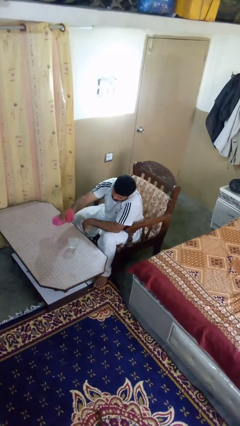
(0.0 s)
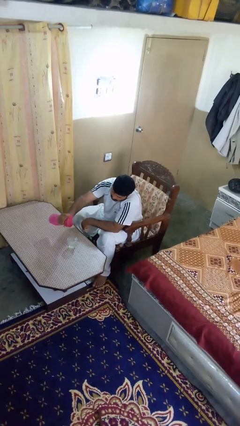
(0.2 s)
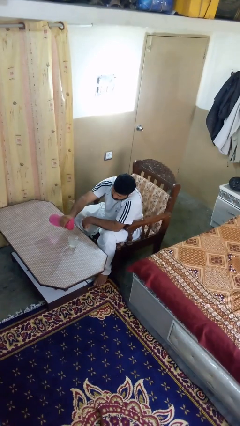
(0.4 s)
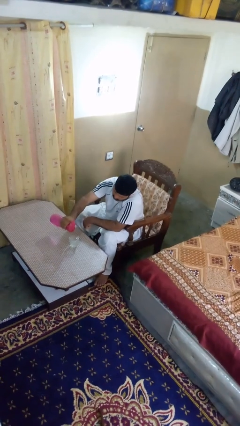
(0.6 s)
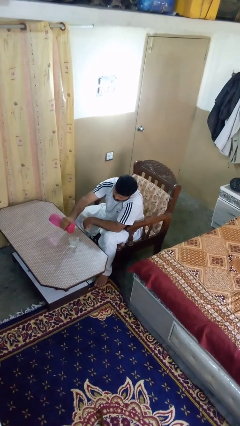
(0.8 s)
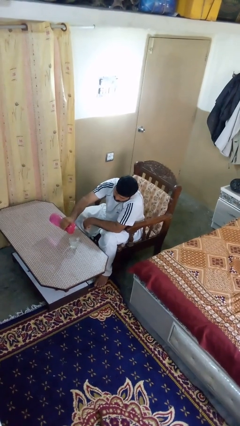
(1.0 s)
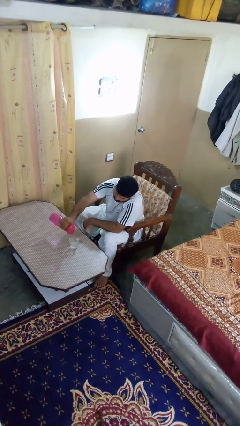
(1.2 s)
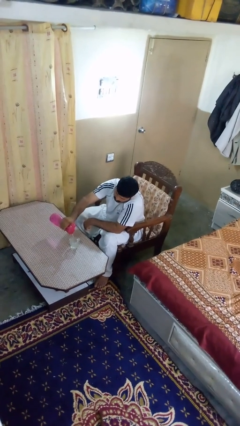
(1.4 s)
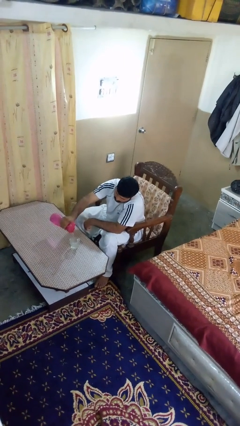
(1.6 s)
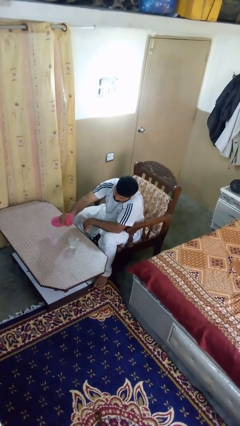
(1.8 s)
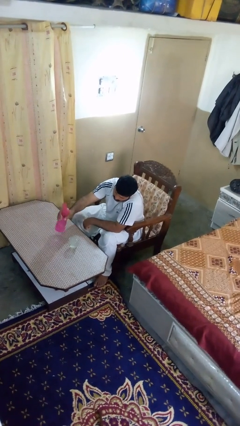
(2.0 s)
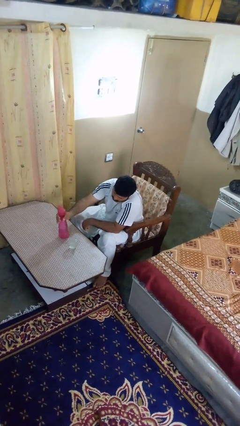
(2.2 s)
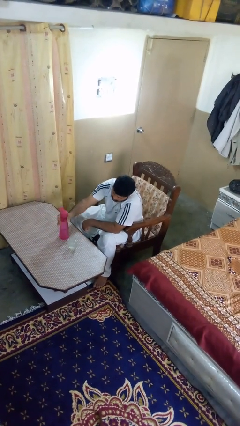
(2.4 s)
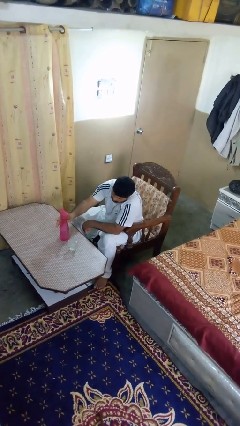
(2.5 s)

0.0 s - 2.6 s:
person pours liquid into cup

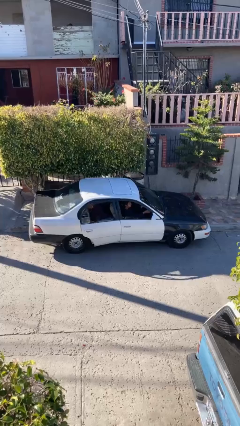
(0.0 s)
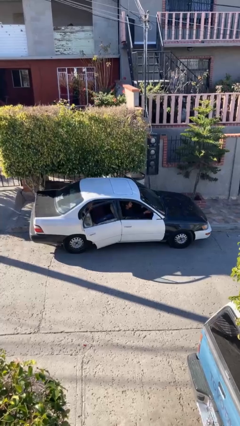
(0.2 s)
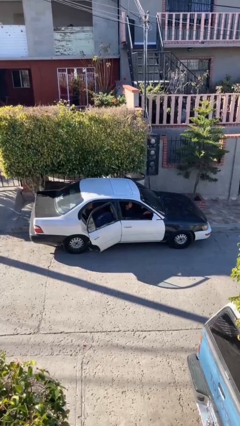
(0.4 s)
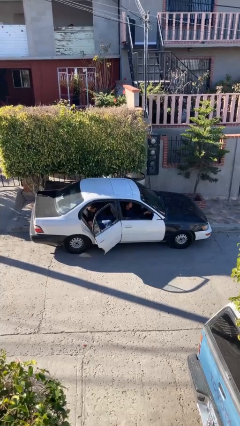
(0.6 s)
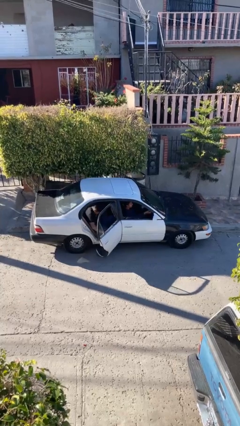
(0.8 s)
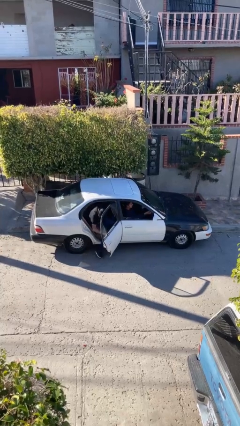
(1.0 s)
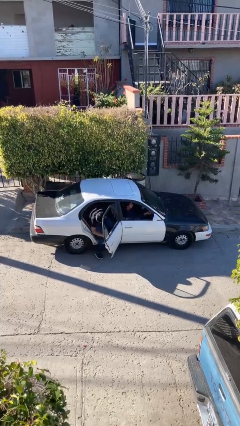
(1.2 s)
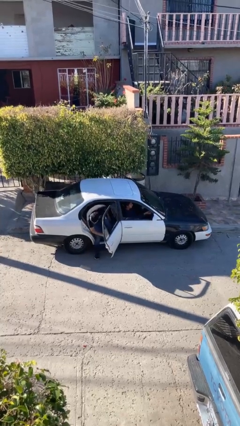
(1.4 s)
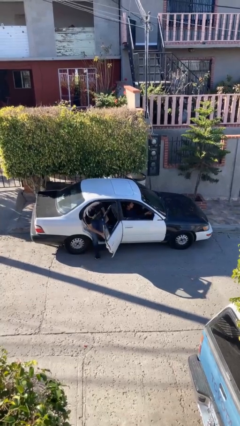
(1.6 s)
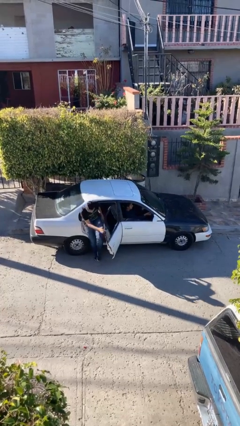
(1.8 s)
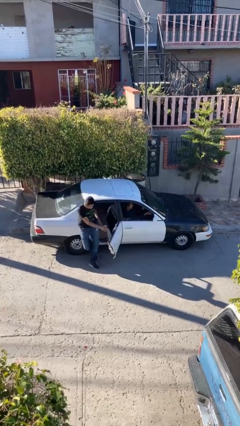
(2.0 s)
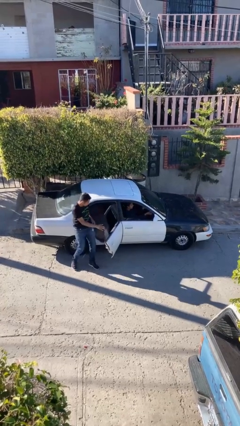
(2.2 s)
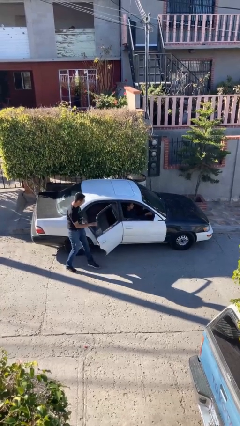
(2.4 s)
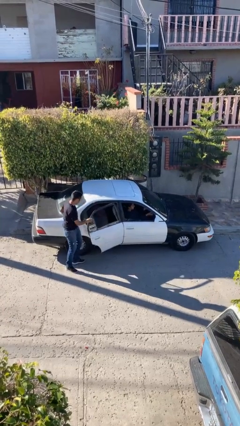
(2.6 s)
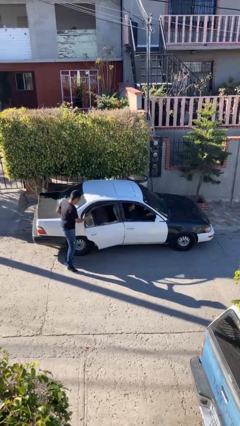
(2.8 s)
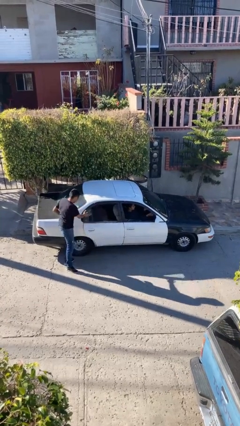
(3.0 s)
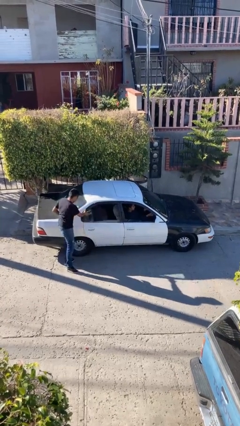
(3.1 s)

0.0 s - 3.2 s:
car drops off person

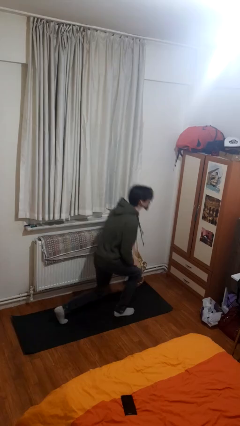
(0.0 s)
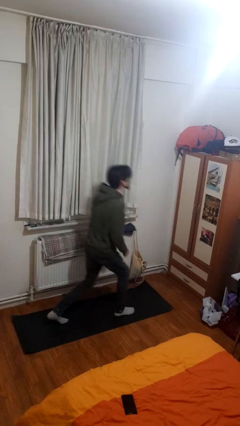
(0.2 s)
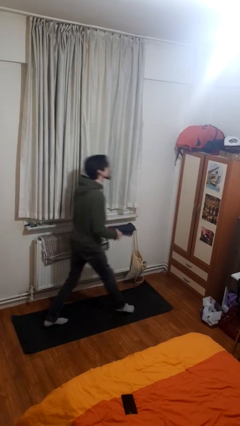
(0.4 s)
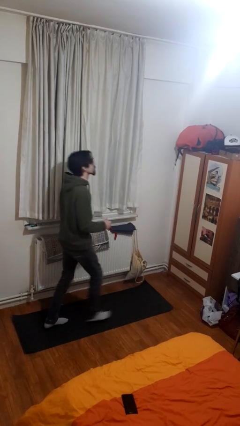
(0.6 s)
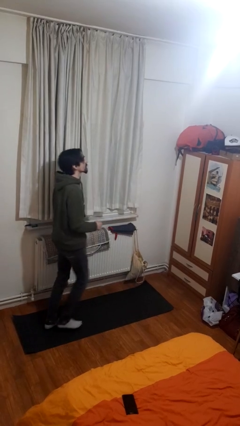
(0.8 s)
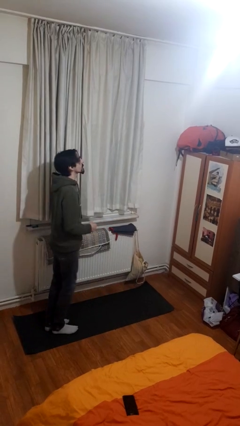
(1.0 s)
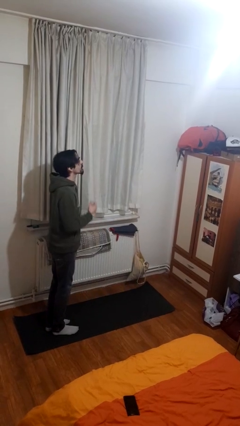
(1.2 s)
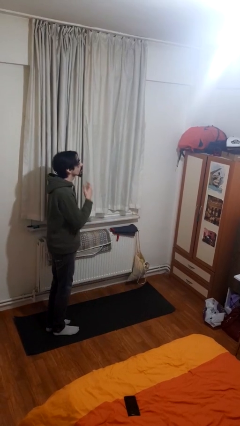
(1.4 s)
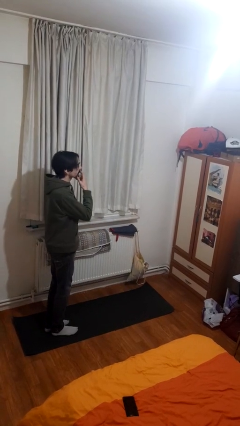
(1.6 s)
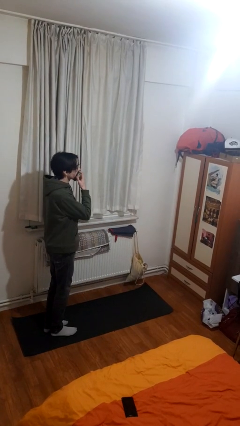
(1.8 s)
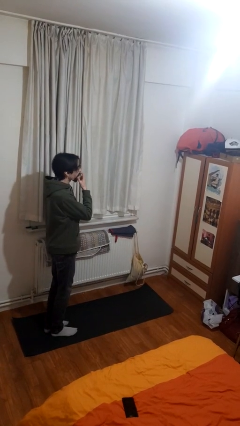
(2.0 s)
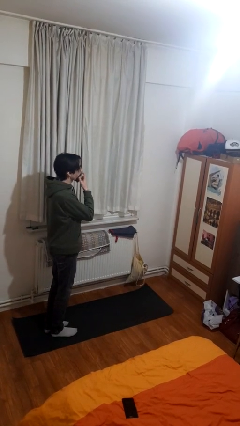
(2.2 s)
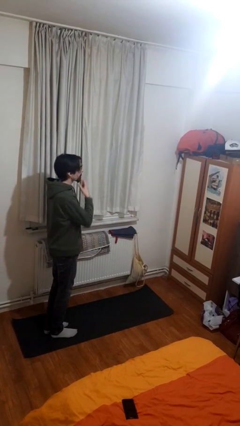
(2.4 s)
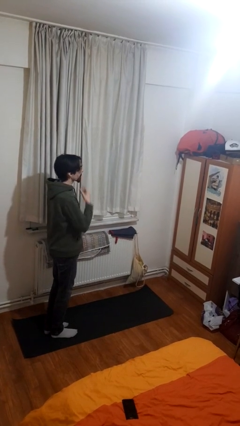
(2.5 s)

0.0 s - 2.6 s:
person stands up from floor

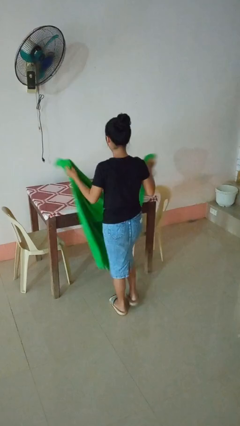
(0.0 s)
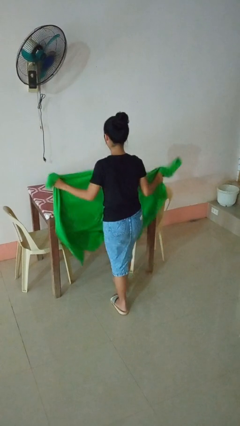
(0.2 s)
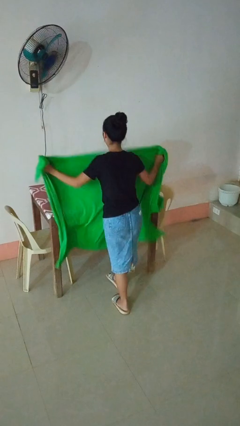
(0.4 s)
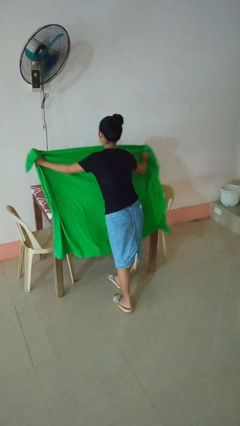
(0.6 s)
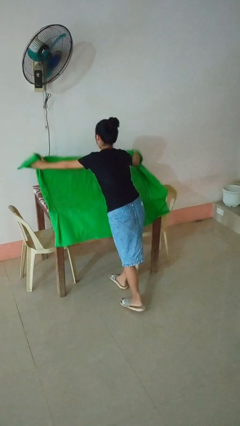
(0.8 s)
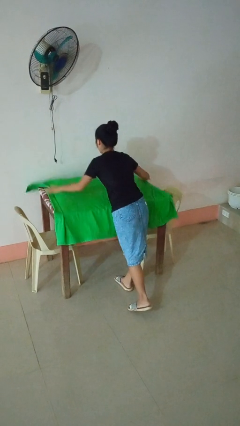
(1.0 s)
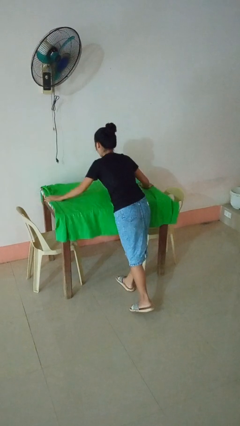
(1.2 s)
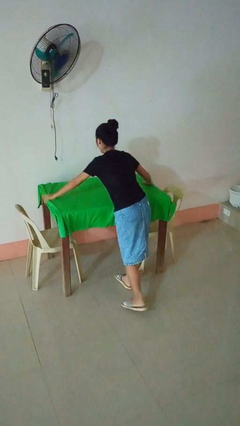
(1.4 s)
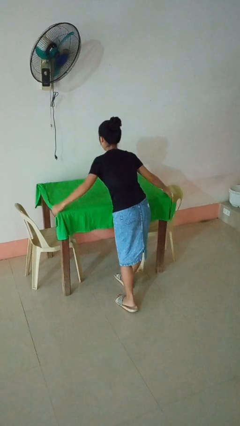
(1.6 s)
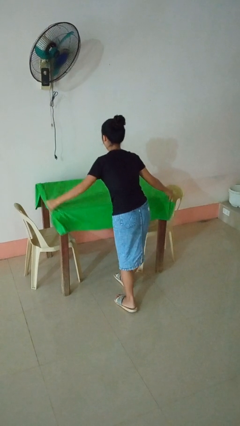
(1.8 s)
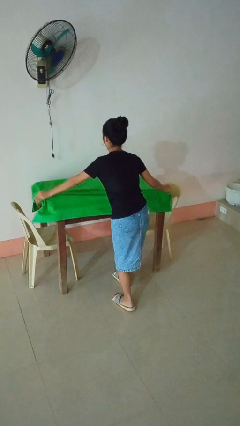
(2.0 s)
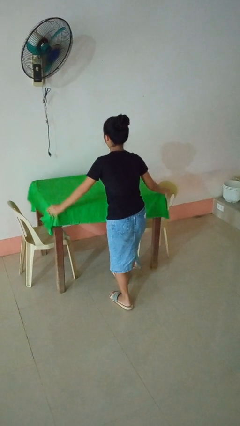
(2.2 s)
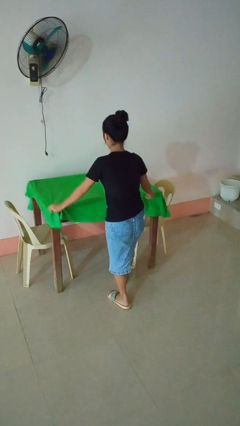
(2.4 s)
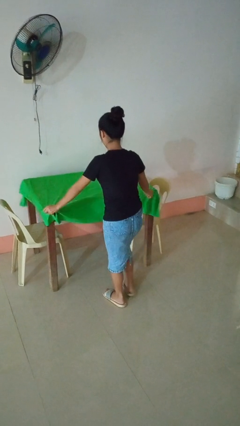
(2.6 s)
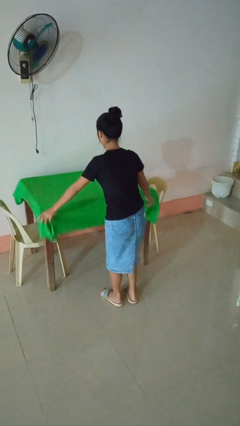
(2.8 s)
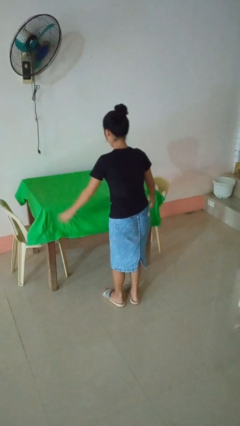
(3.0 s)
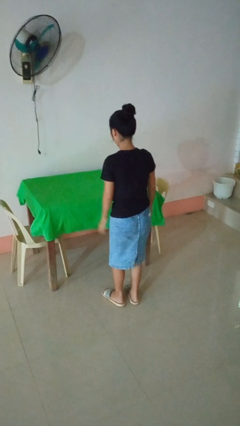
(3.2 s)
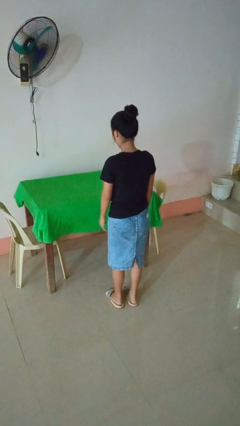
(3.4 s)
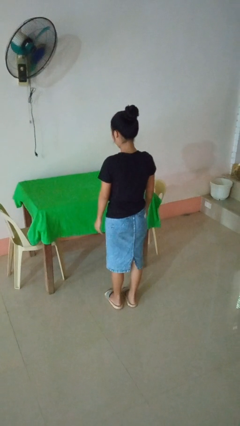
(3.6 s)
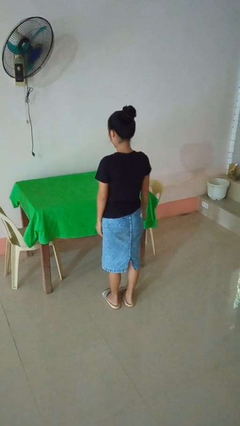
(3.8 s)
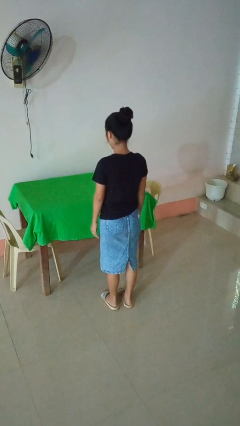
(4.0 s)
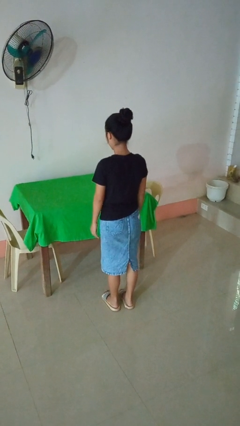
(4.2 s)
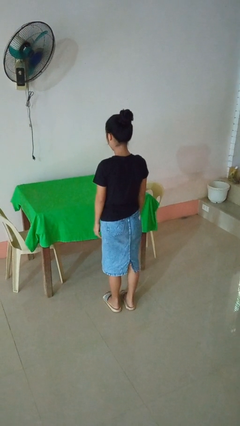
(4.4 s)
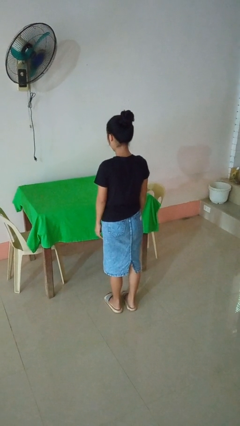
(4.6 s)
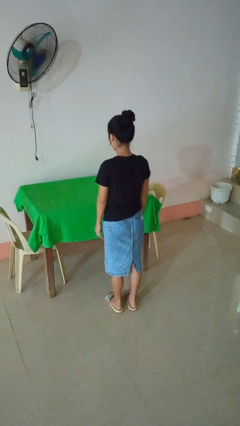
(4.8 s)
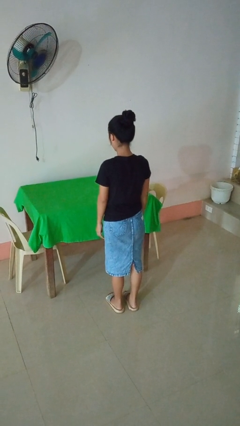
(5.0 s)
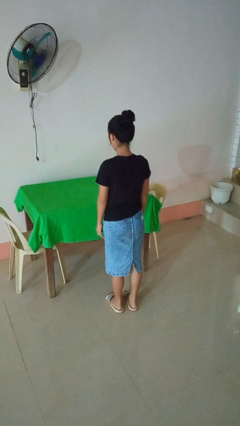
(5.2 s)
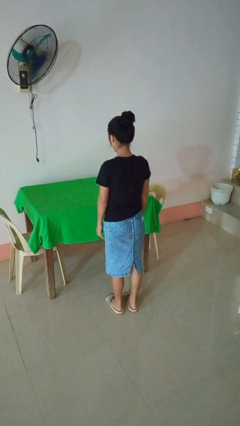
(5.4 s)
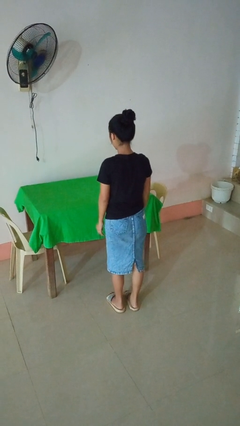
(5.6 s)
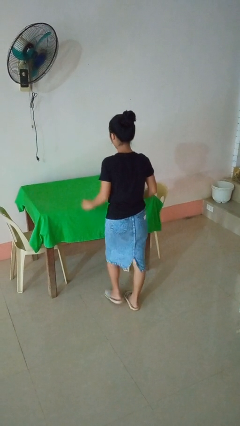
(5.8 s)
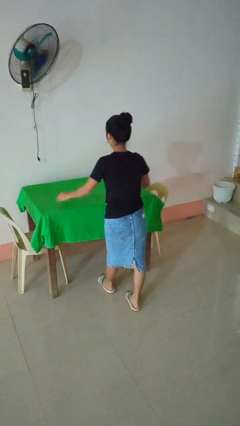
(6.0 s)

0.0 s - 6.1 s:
person spreads tablecloth

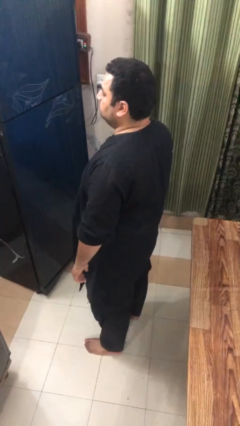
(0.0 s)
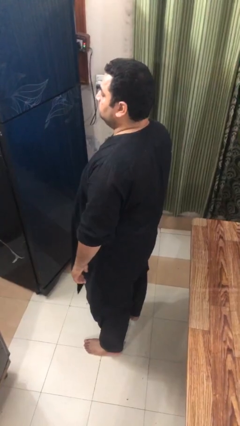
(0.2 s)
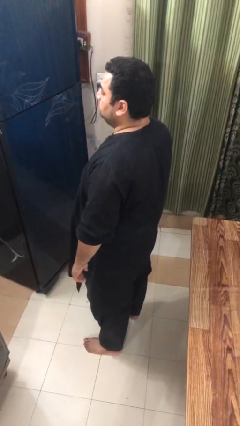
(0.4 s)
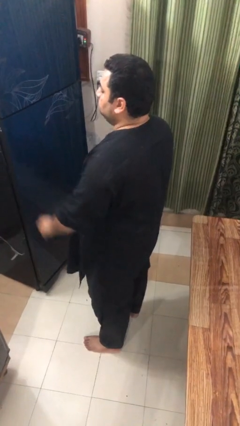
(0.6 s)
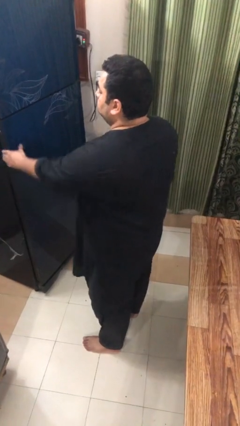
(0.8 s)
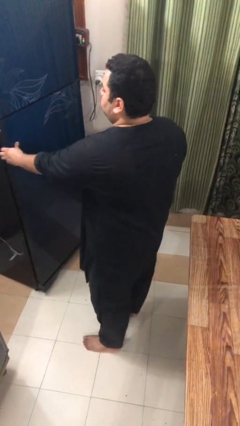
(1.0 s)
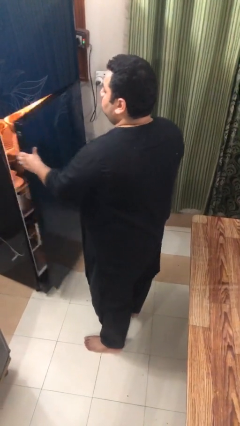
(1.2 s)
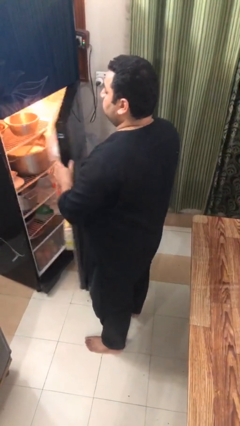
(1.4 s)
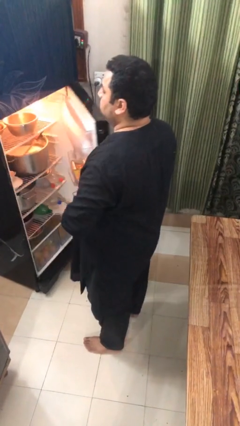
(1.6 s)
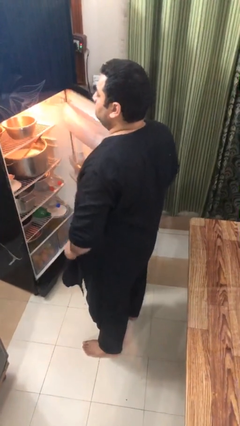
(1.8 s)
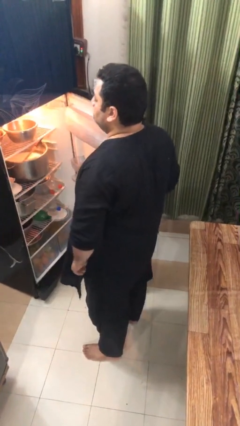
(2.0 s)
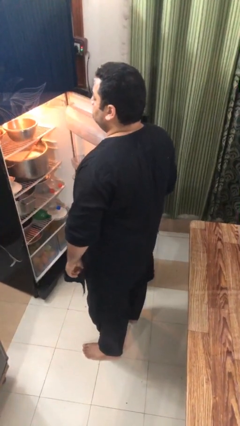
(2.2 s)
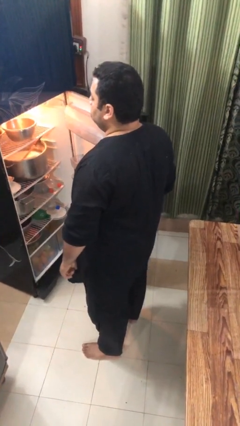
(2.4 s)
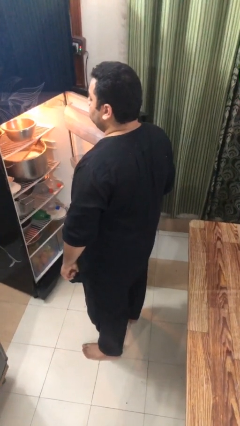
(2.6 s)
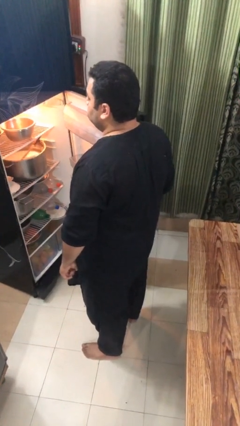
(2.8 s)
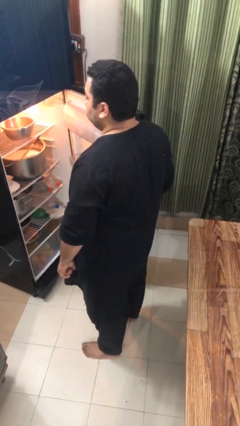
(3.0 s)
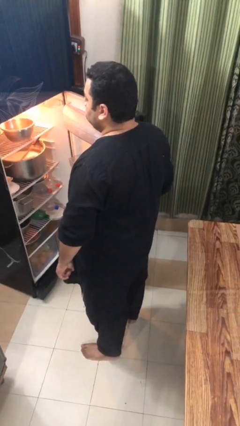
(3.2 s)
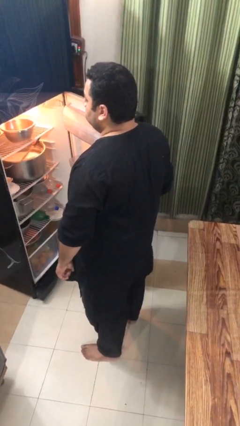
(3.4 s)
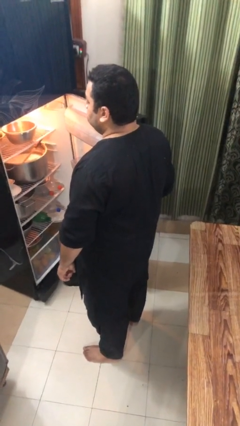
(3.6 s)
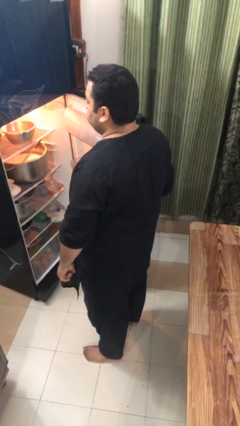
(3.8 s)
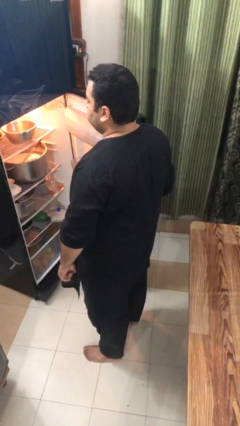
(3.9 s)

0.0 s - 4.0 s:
person opens refrigerator
